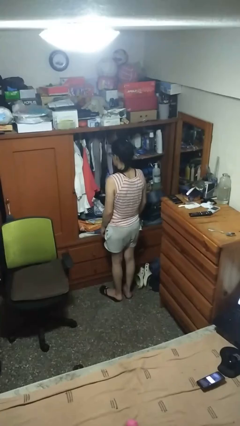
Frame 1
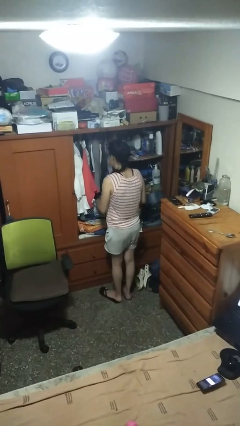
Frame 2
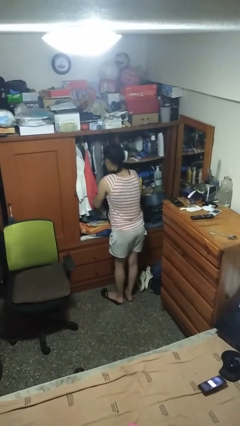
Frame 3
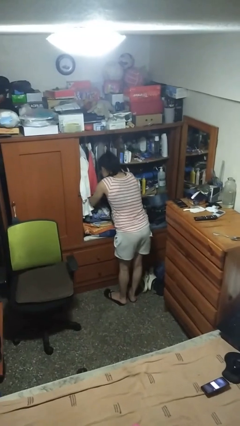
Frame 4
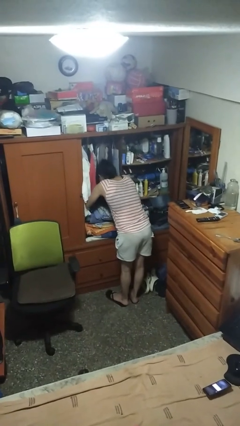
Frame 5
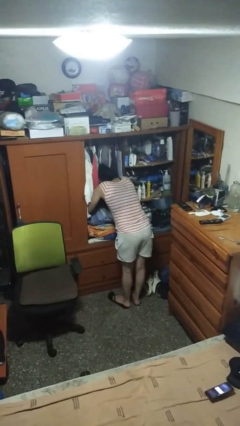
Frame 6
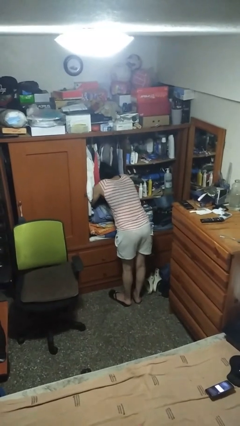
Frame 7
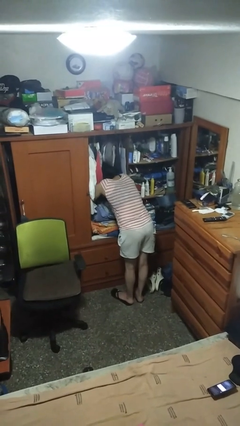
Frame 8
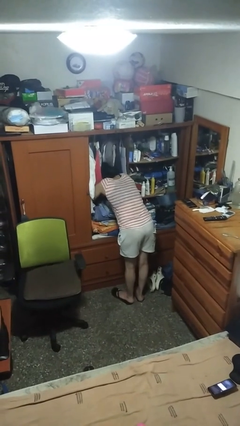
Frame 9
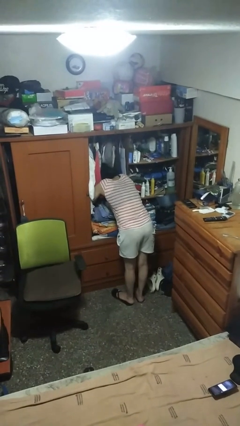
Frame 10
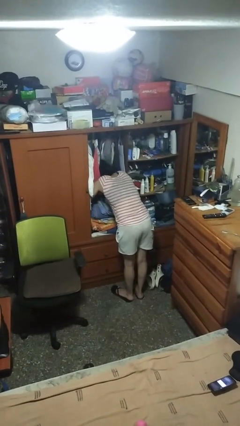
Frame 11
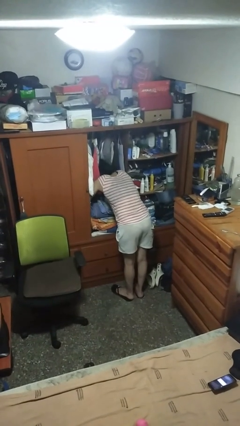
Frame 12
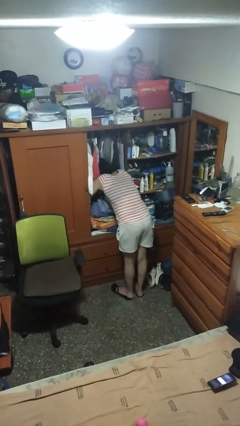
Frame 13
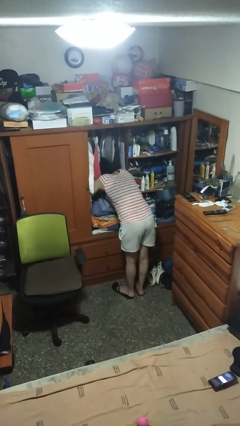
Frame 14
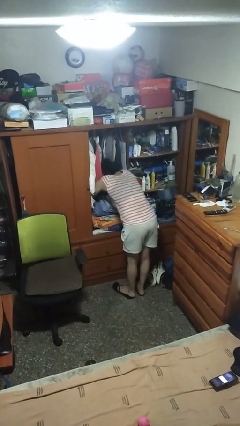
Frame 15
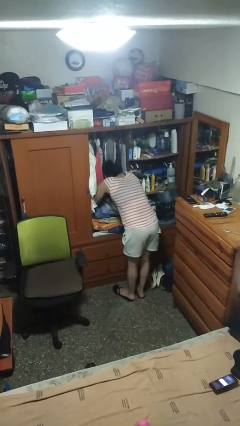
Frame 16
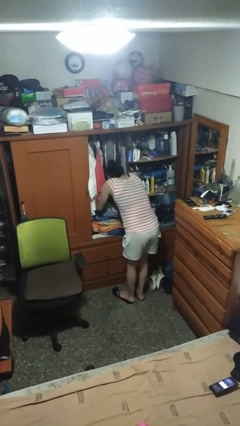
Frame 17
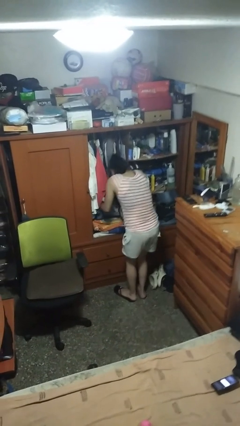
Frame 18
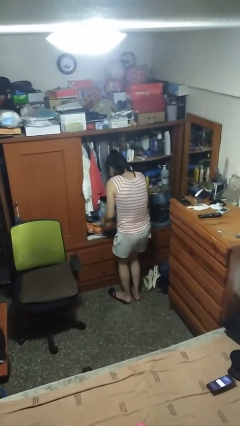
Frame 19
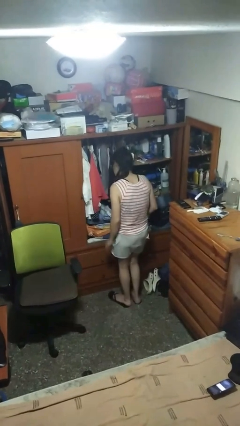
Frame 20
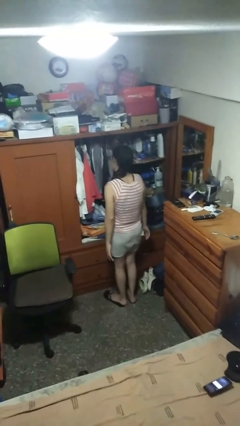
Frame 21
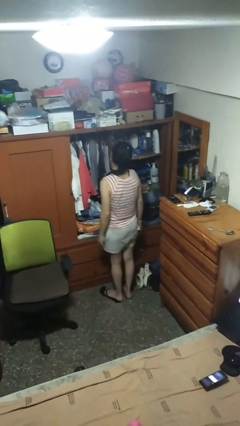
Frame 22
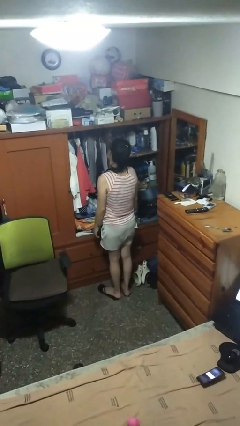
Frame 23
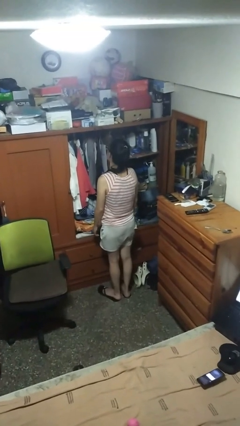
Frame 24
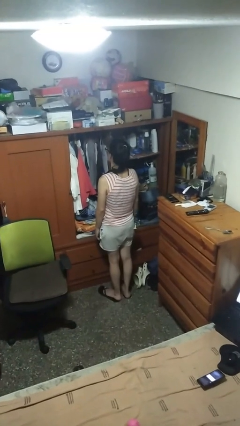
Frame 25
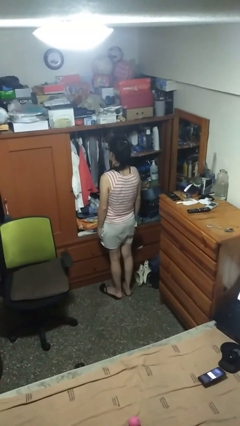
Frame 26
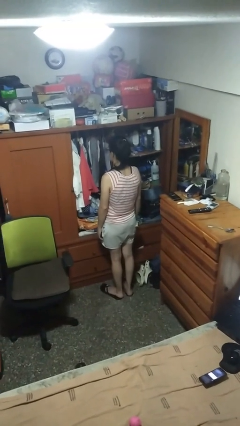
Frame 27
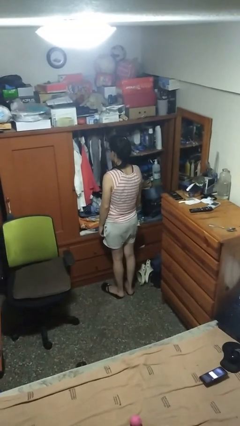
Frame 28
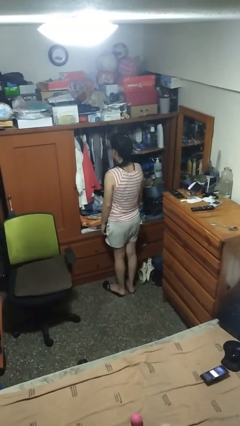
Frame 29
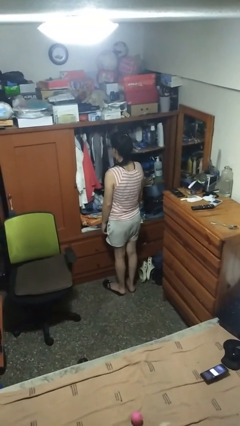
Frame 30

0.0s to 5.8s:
person searches in cabinet

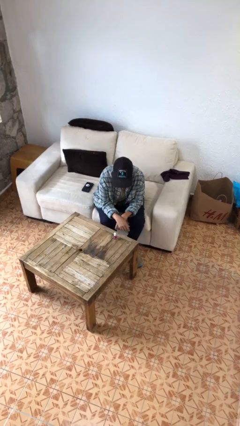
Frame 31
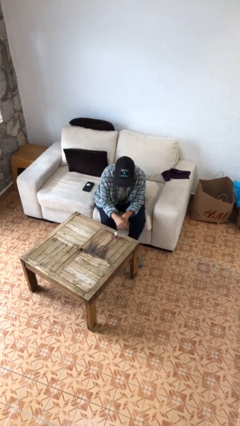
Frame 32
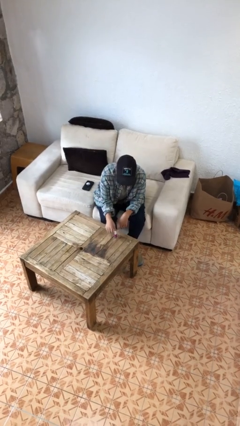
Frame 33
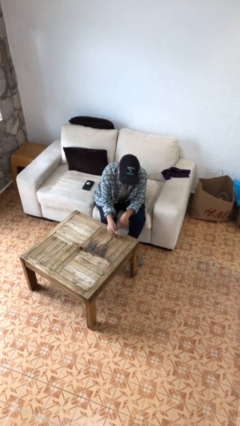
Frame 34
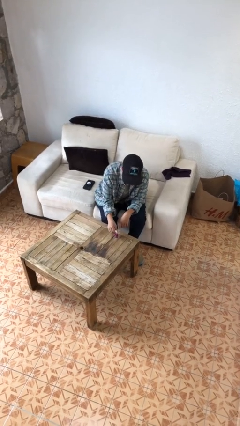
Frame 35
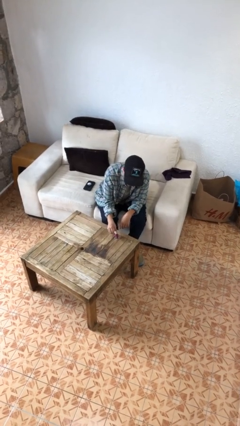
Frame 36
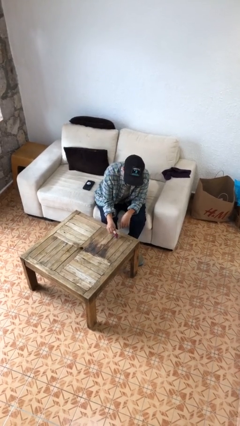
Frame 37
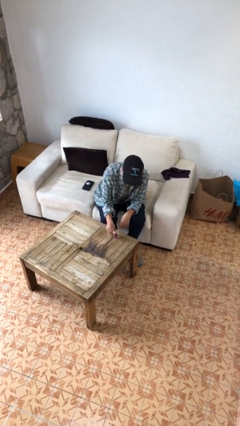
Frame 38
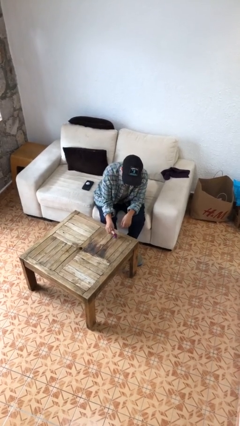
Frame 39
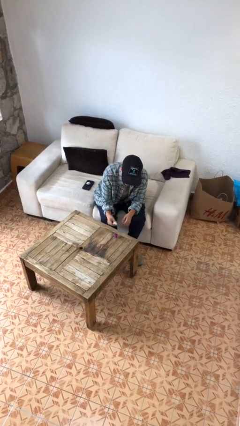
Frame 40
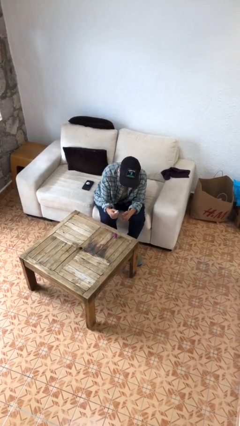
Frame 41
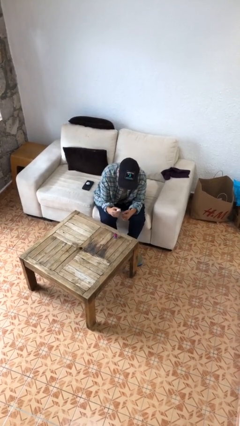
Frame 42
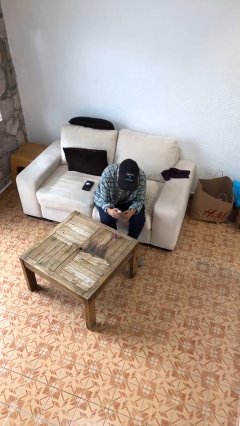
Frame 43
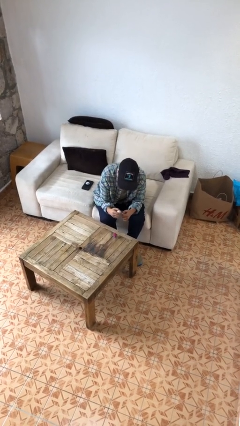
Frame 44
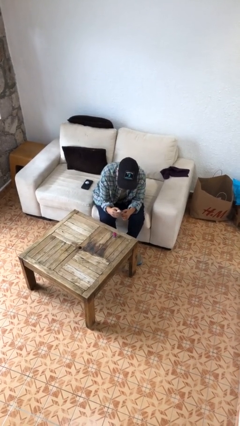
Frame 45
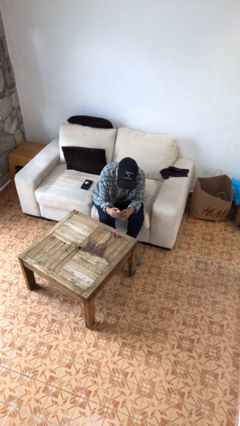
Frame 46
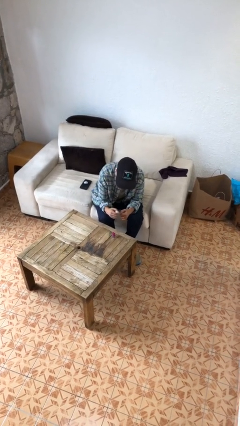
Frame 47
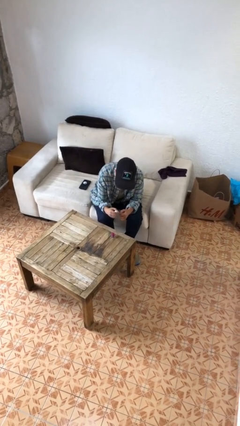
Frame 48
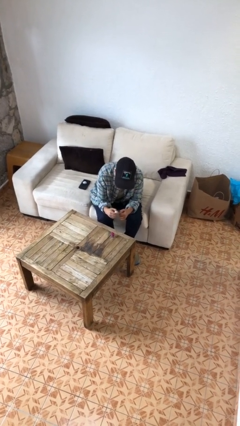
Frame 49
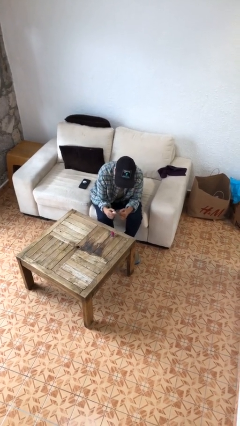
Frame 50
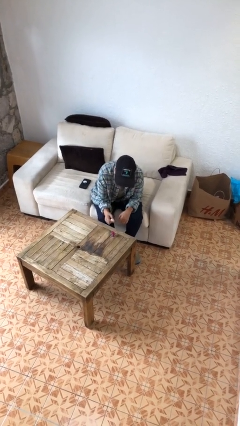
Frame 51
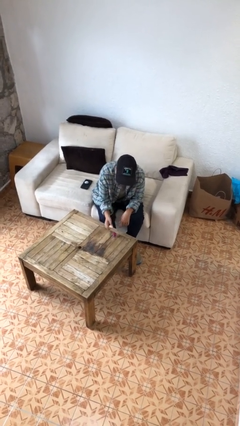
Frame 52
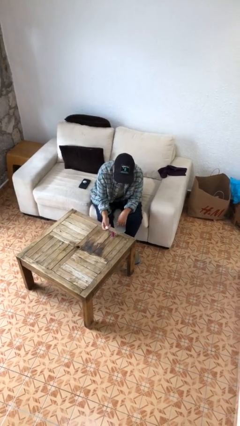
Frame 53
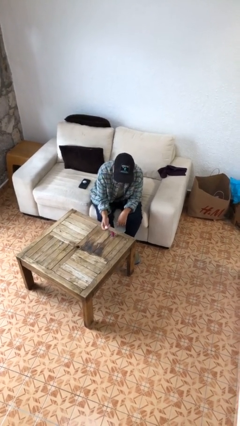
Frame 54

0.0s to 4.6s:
person paints fingernails

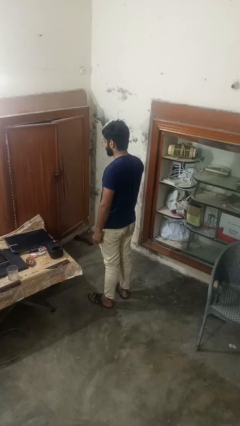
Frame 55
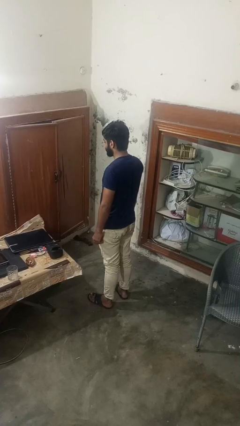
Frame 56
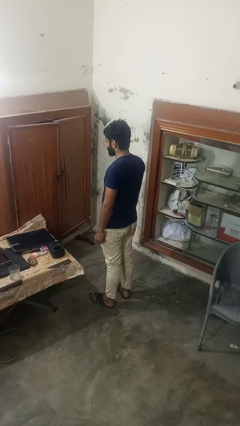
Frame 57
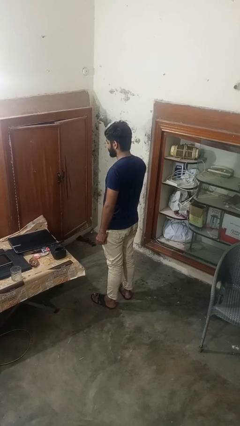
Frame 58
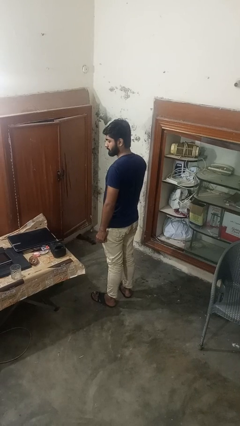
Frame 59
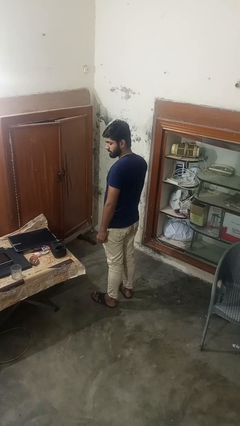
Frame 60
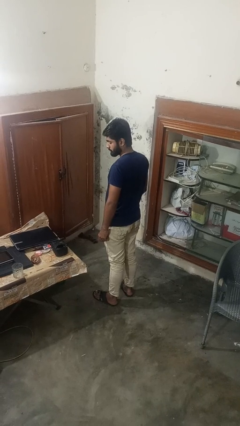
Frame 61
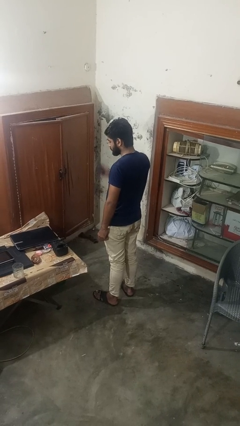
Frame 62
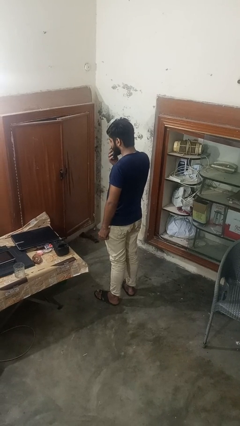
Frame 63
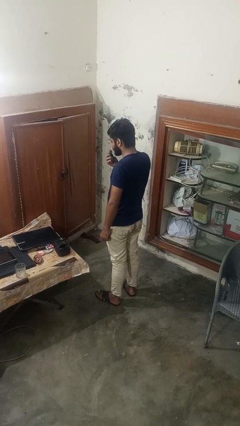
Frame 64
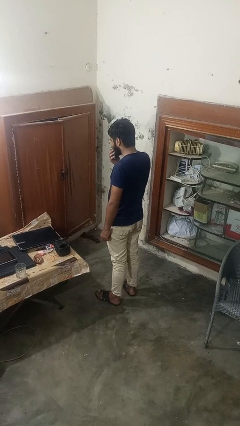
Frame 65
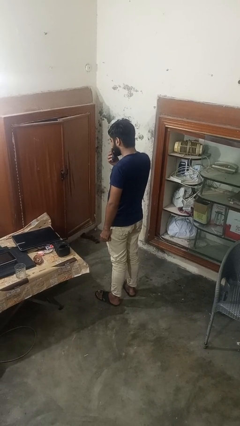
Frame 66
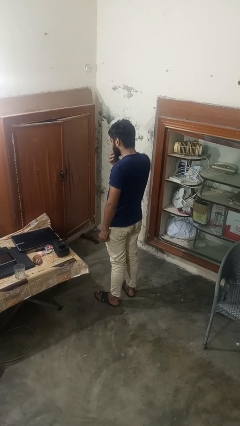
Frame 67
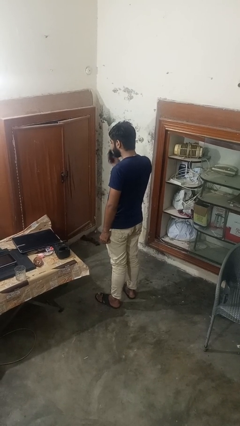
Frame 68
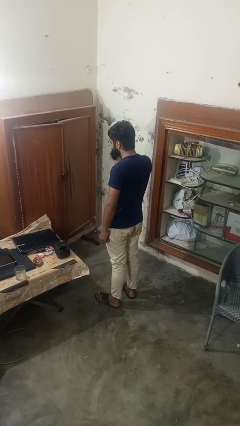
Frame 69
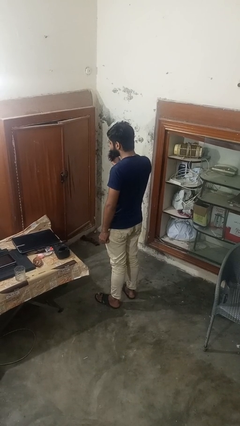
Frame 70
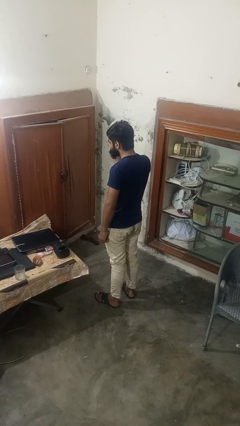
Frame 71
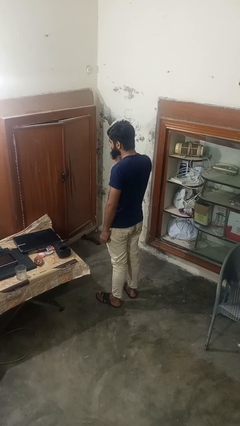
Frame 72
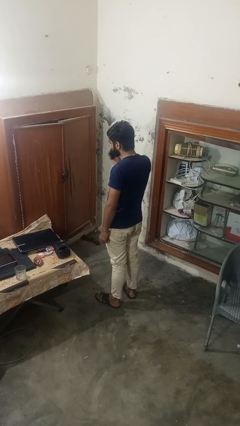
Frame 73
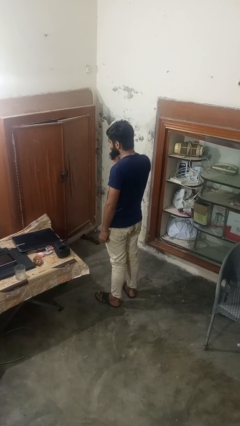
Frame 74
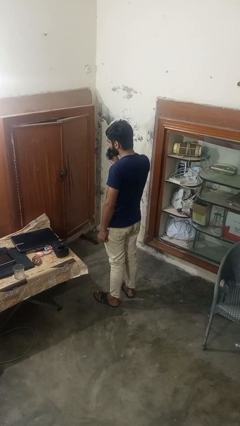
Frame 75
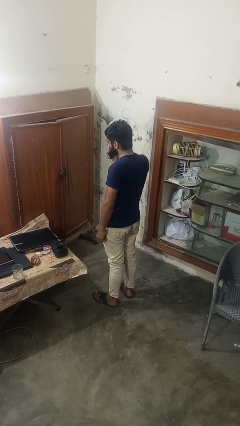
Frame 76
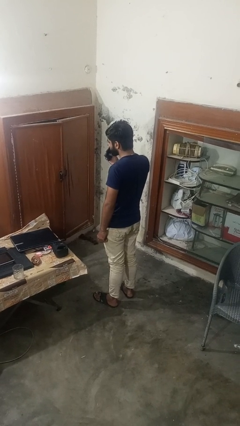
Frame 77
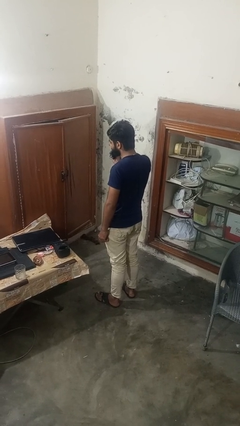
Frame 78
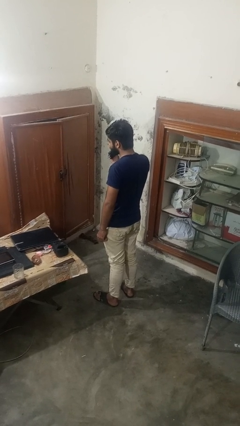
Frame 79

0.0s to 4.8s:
person wipes mouth with napkin

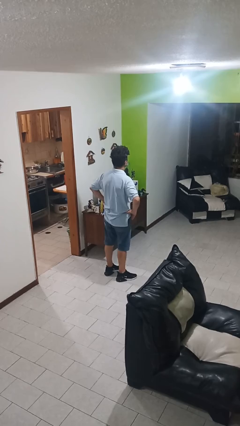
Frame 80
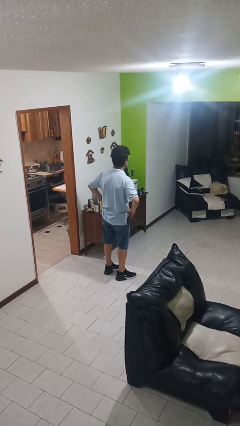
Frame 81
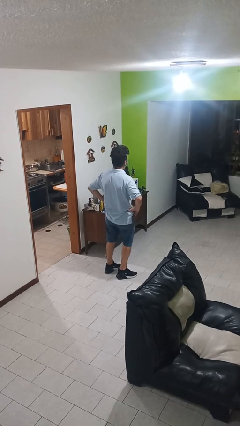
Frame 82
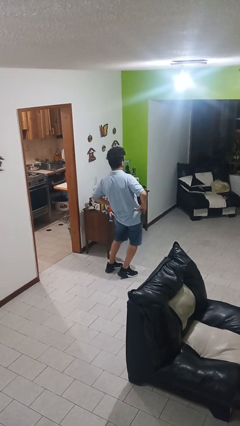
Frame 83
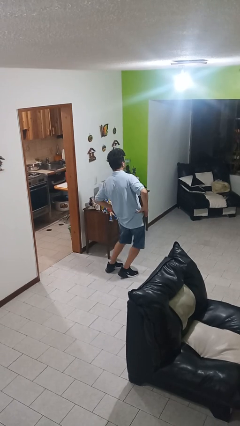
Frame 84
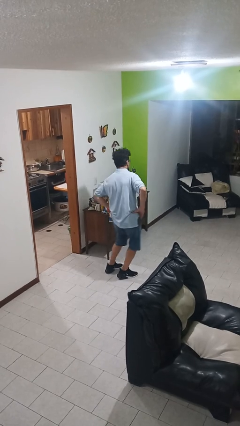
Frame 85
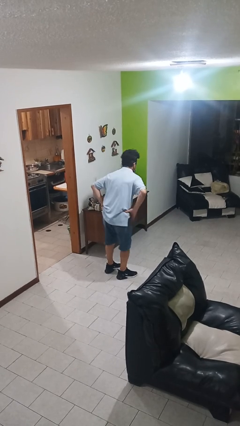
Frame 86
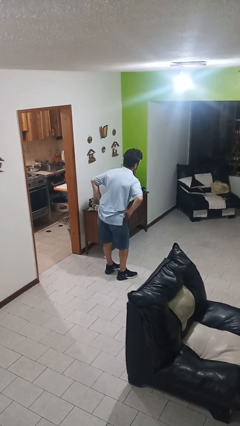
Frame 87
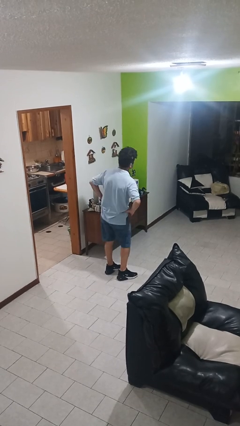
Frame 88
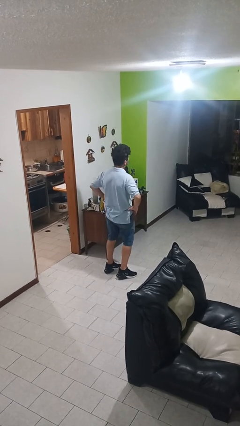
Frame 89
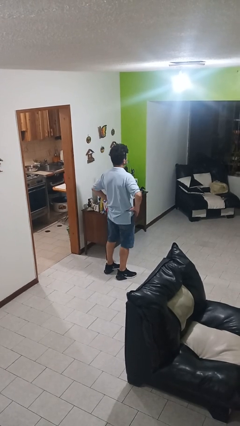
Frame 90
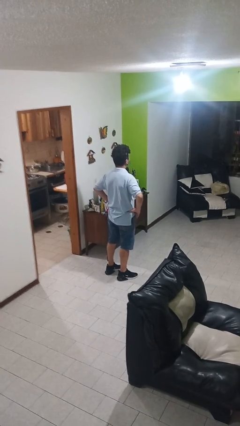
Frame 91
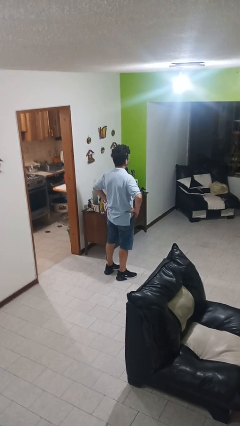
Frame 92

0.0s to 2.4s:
person wiggles hips
